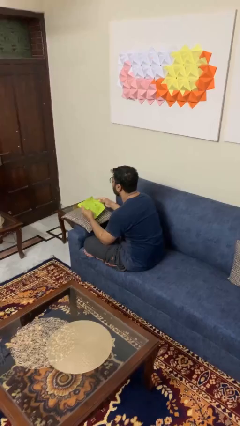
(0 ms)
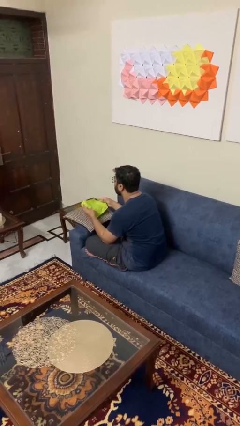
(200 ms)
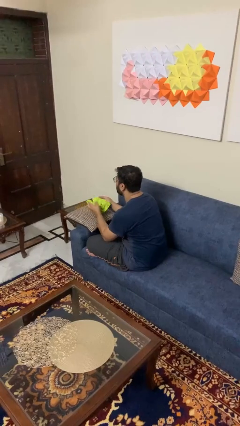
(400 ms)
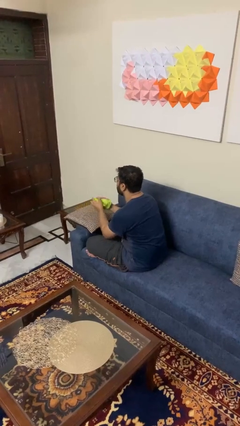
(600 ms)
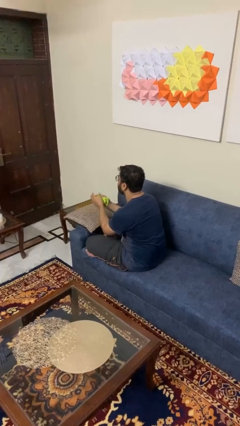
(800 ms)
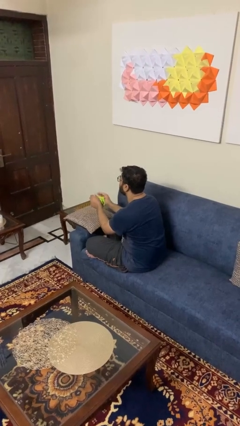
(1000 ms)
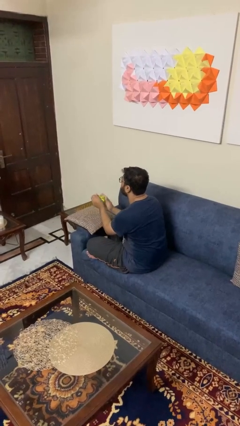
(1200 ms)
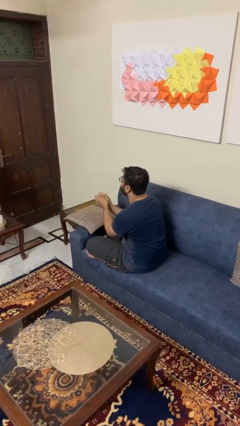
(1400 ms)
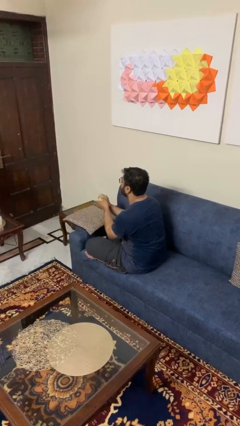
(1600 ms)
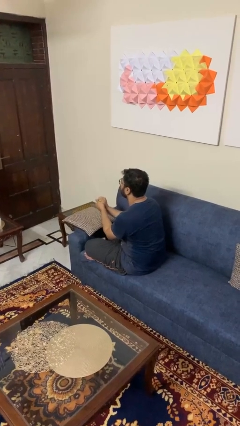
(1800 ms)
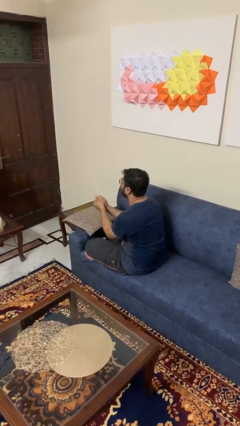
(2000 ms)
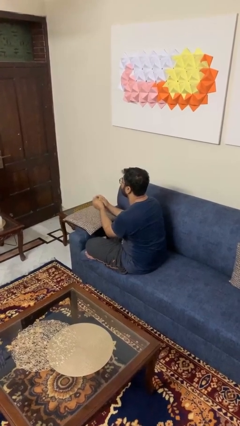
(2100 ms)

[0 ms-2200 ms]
person crumples paper

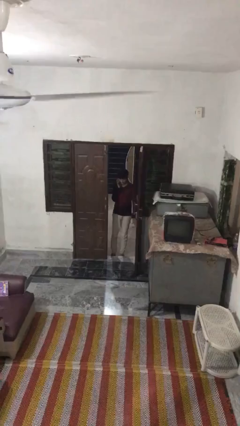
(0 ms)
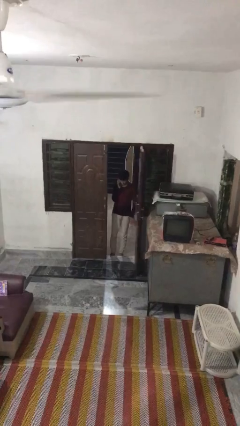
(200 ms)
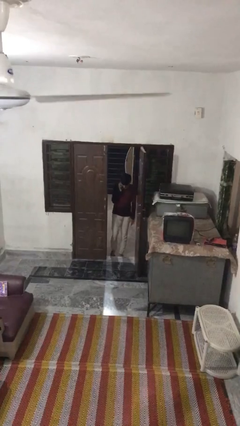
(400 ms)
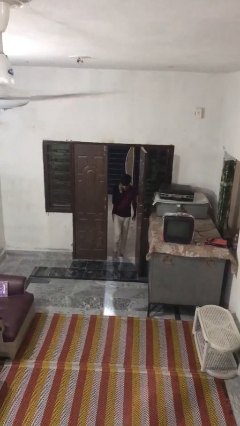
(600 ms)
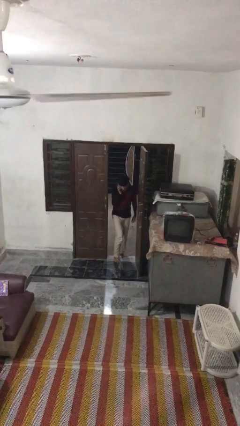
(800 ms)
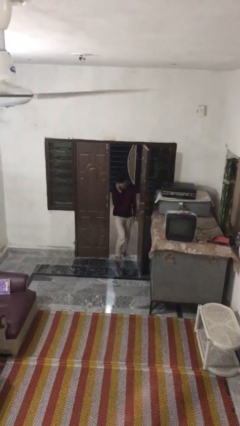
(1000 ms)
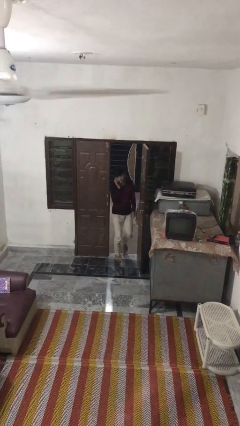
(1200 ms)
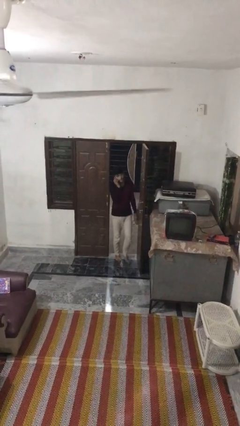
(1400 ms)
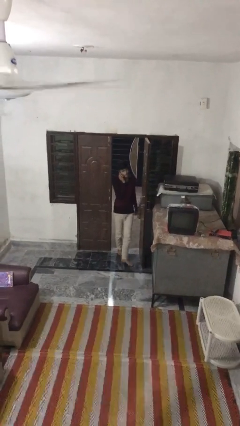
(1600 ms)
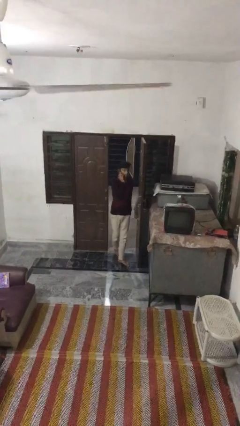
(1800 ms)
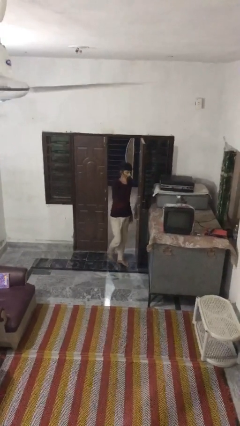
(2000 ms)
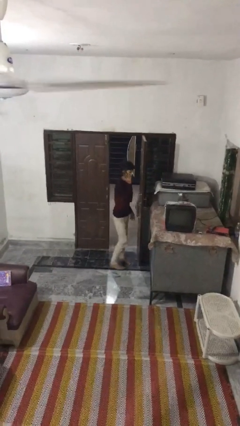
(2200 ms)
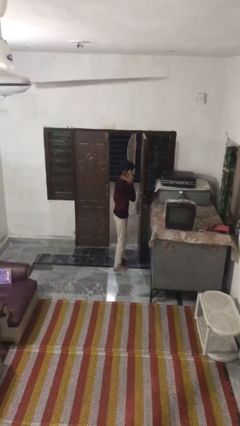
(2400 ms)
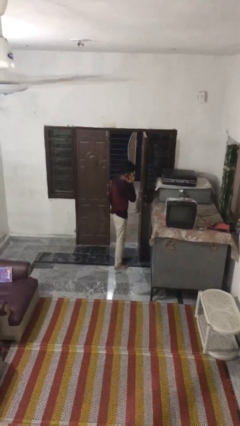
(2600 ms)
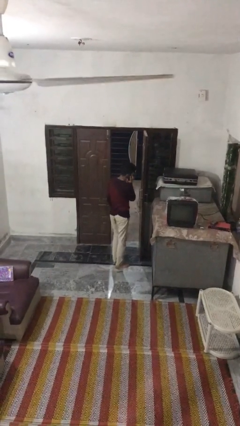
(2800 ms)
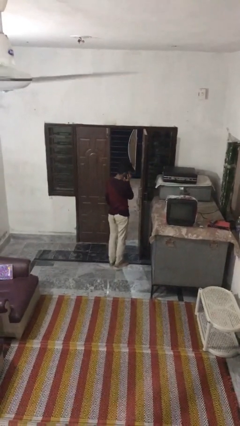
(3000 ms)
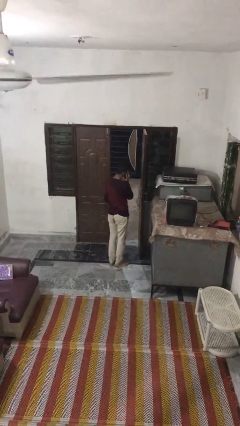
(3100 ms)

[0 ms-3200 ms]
person enters scene through structure

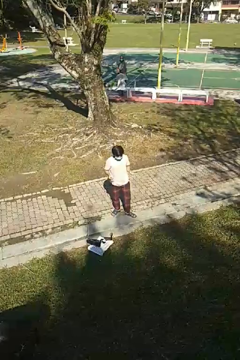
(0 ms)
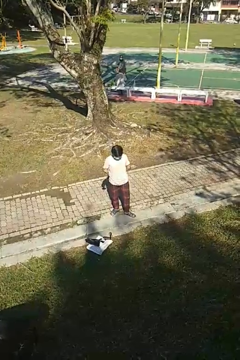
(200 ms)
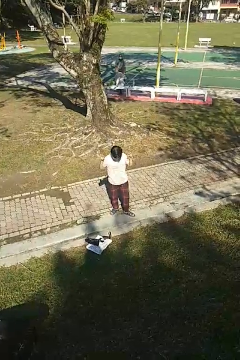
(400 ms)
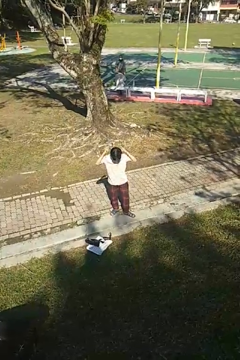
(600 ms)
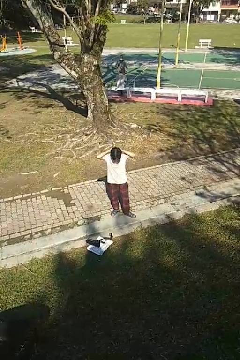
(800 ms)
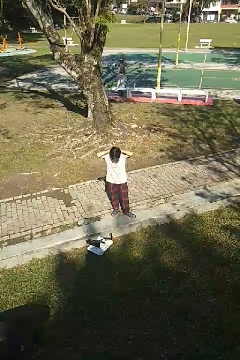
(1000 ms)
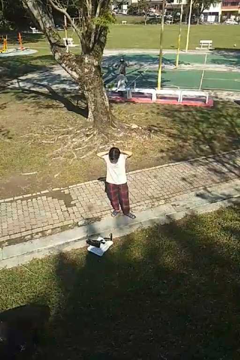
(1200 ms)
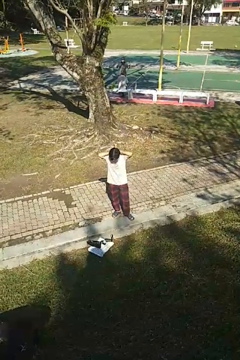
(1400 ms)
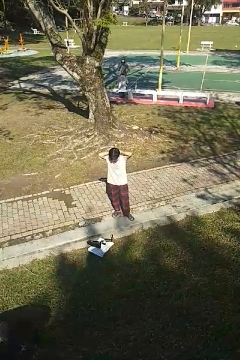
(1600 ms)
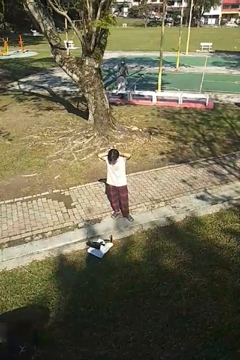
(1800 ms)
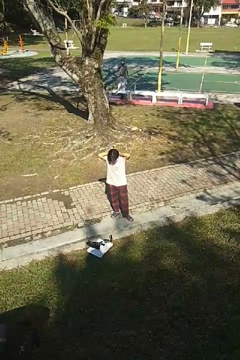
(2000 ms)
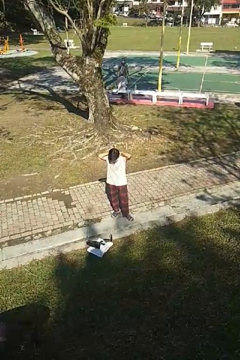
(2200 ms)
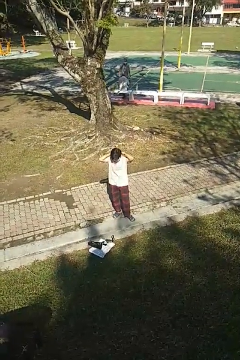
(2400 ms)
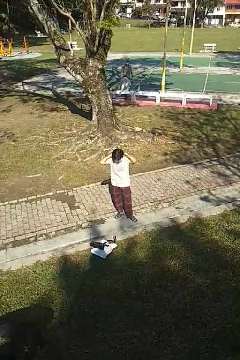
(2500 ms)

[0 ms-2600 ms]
person puts on necklace

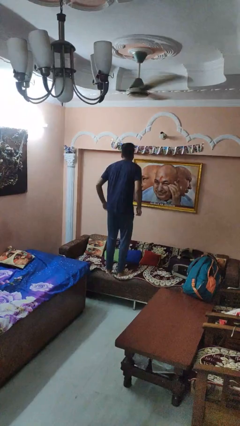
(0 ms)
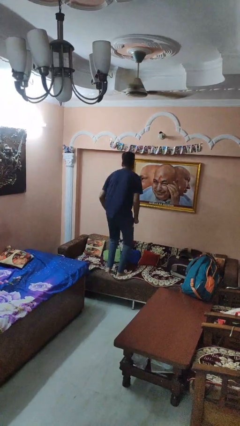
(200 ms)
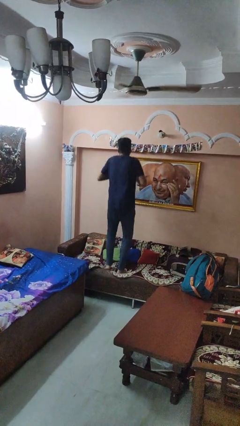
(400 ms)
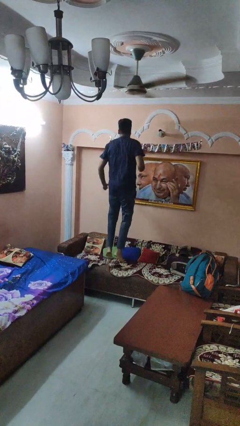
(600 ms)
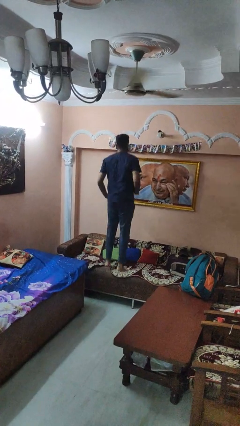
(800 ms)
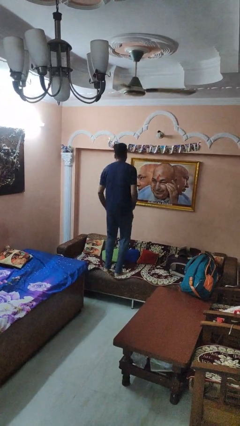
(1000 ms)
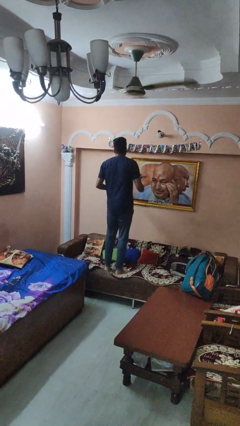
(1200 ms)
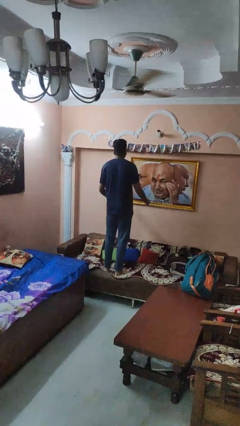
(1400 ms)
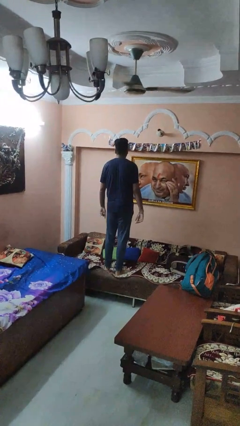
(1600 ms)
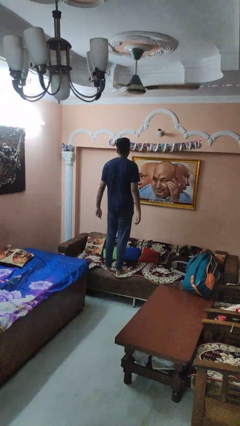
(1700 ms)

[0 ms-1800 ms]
person jumps on couch

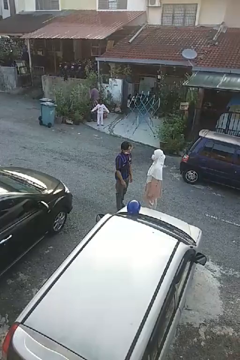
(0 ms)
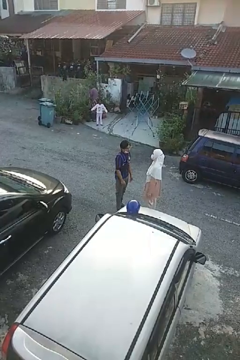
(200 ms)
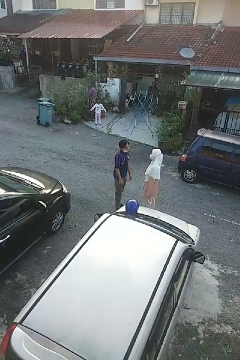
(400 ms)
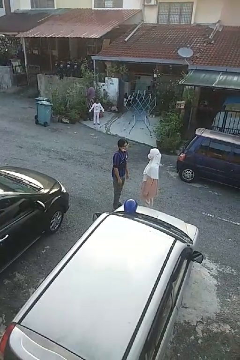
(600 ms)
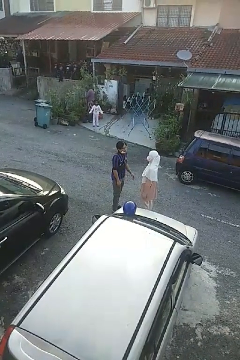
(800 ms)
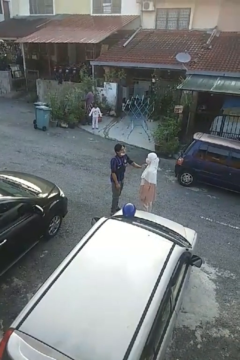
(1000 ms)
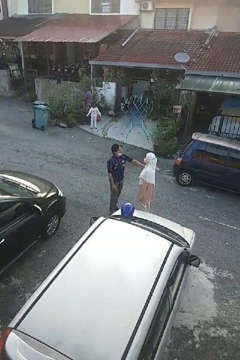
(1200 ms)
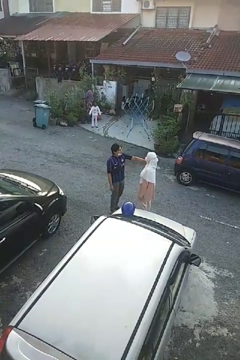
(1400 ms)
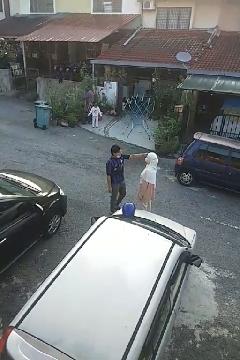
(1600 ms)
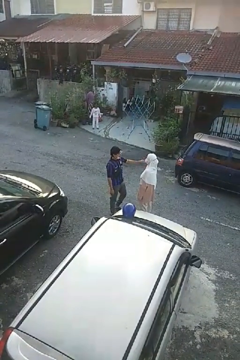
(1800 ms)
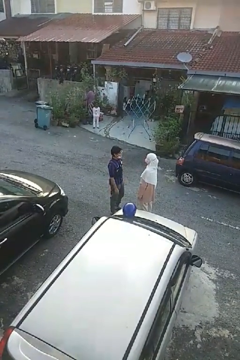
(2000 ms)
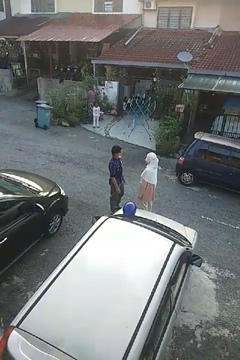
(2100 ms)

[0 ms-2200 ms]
person shoves person

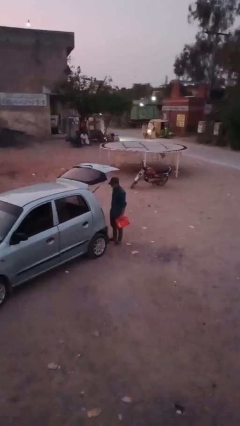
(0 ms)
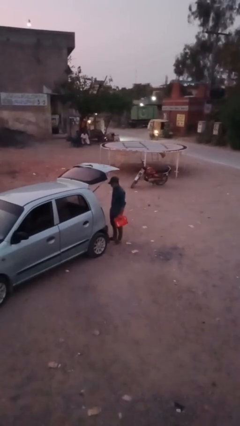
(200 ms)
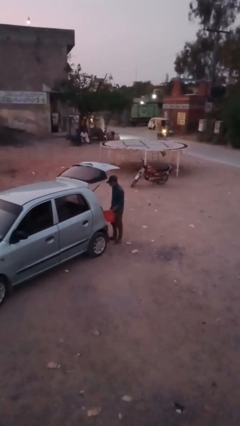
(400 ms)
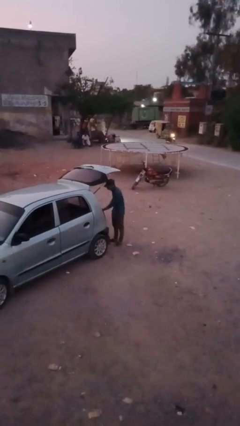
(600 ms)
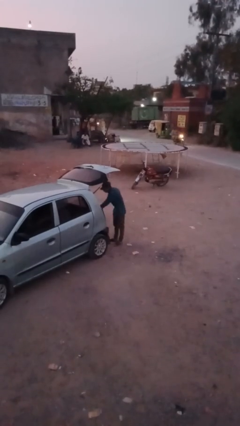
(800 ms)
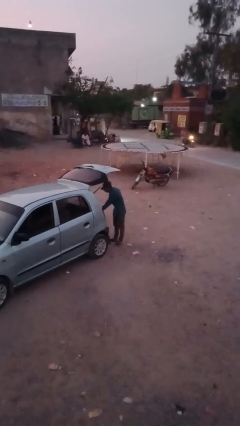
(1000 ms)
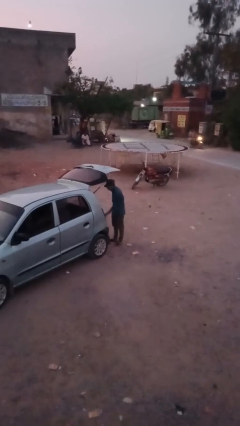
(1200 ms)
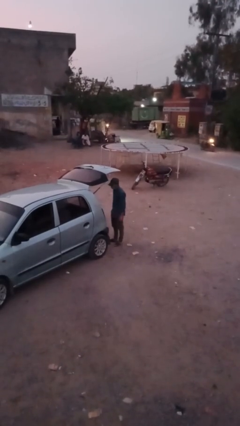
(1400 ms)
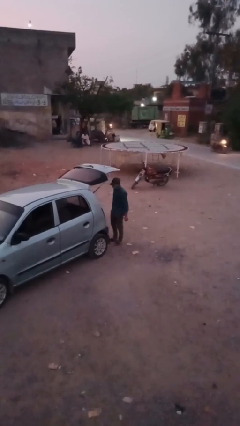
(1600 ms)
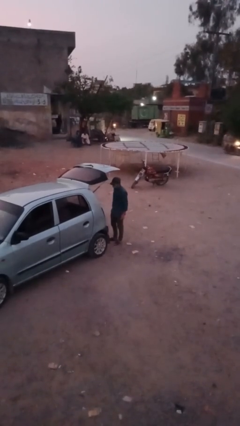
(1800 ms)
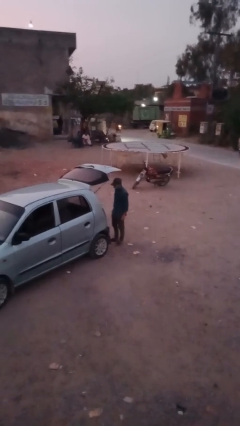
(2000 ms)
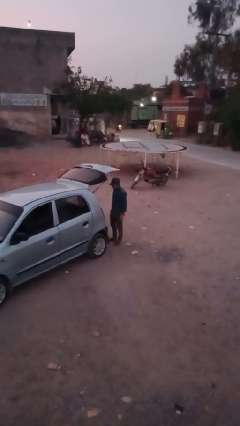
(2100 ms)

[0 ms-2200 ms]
person loads car

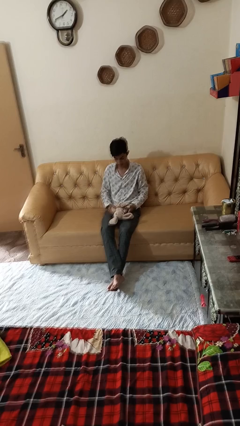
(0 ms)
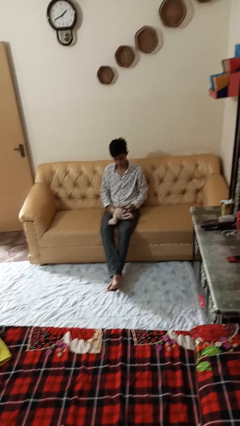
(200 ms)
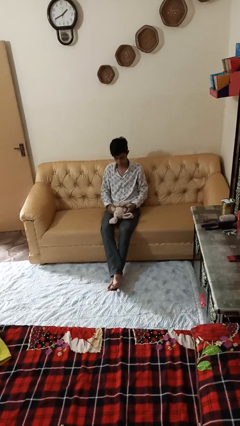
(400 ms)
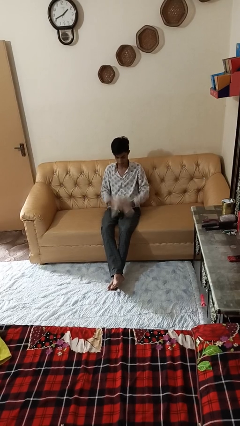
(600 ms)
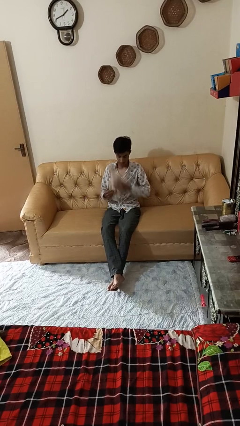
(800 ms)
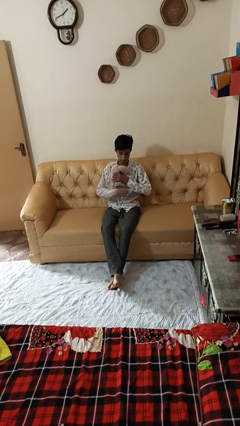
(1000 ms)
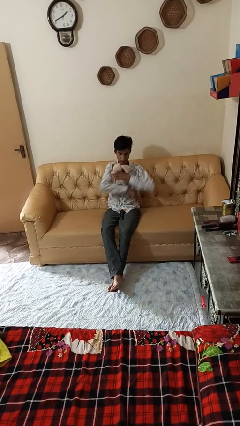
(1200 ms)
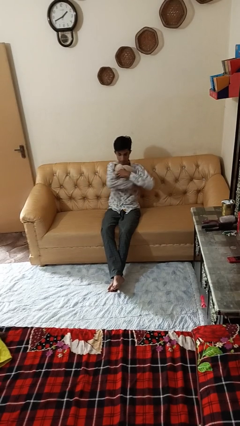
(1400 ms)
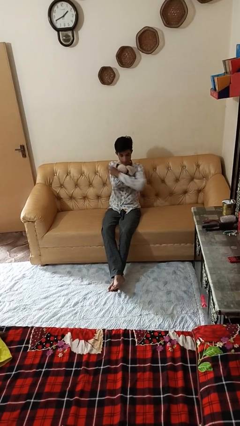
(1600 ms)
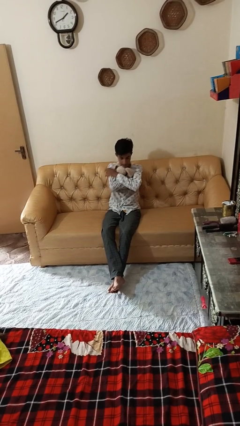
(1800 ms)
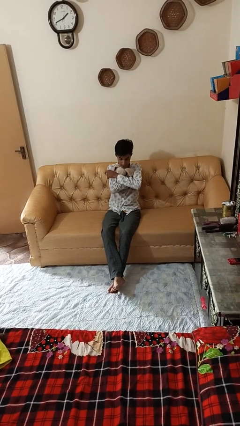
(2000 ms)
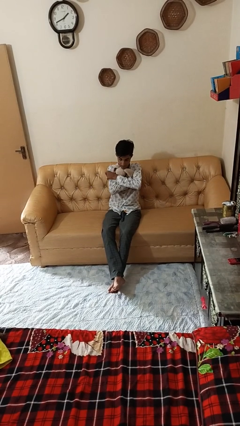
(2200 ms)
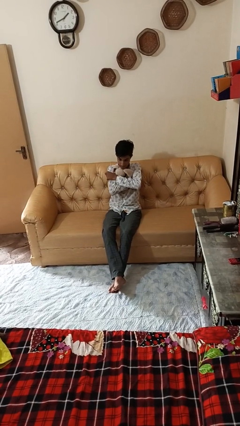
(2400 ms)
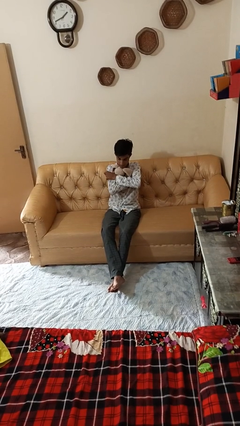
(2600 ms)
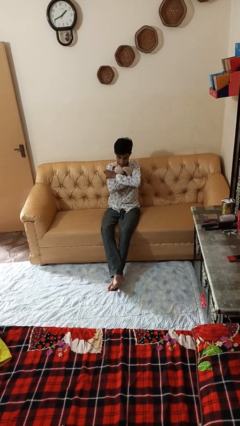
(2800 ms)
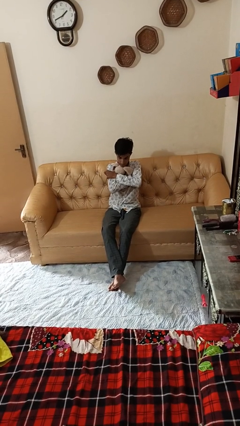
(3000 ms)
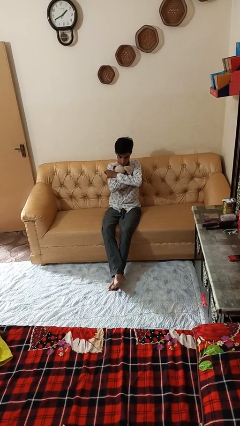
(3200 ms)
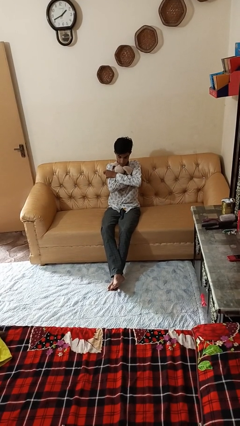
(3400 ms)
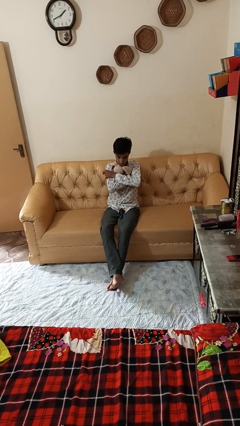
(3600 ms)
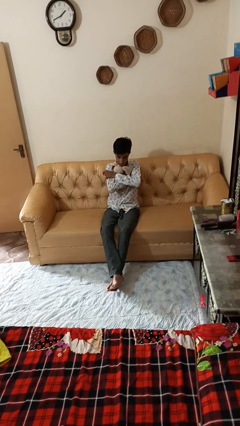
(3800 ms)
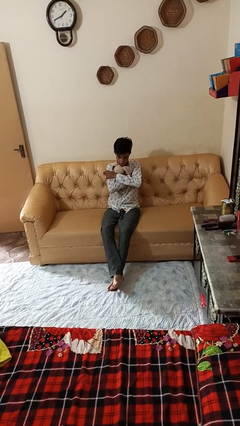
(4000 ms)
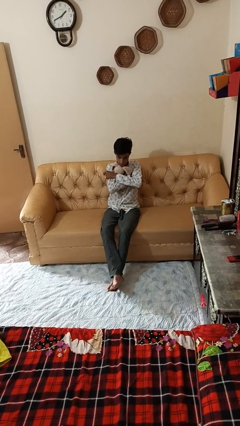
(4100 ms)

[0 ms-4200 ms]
person hugs stuffed animal
